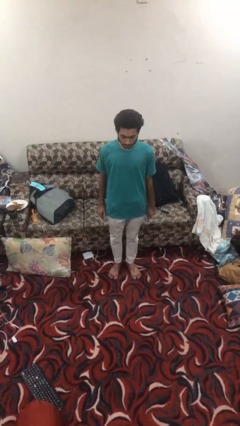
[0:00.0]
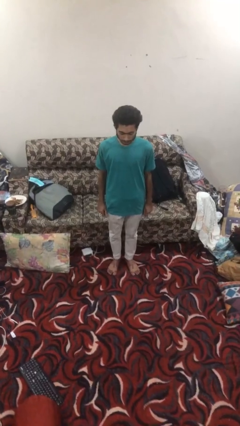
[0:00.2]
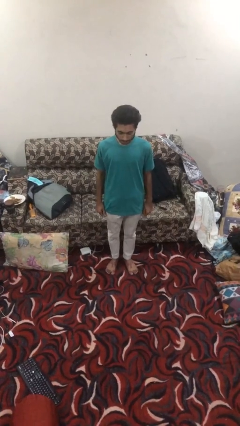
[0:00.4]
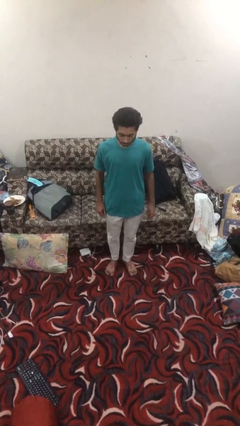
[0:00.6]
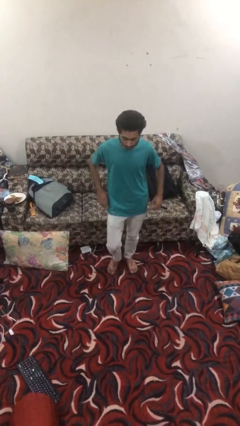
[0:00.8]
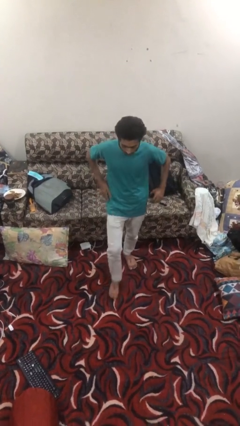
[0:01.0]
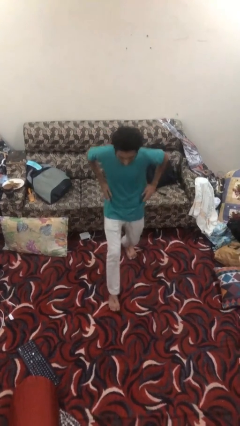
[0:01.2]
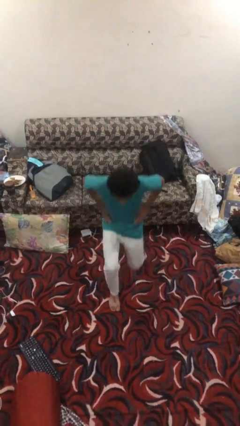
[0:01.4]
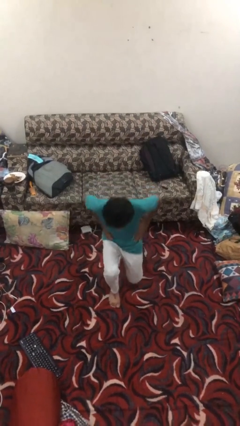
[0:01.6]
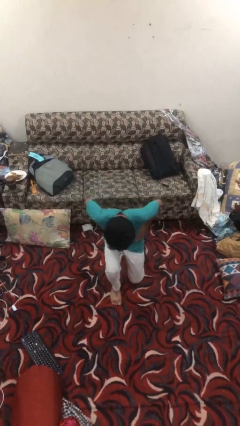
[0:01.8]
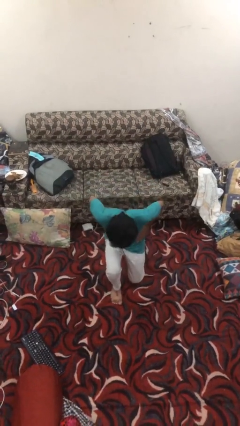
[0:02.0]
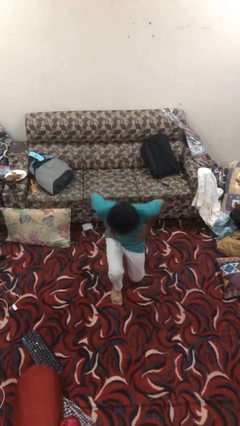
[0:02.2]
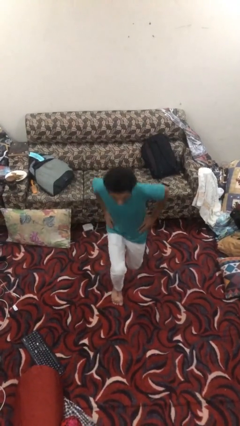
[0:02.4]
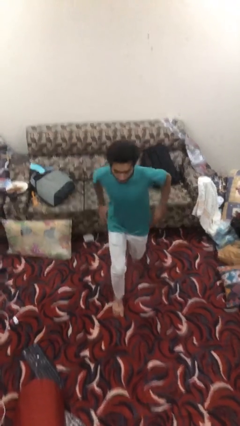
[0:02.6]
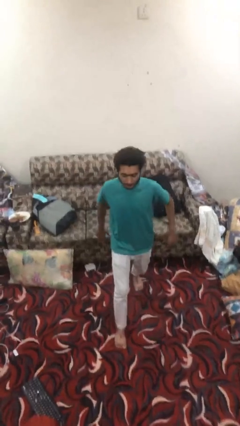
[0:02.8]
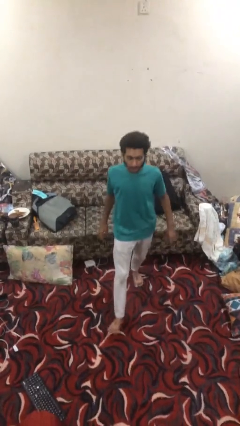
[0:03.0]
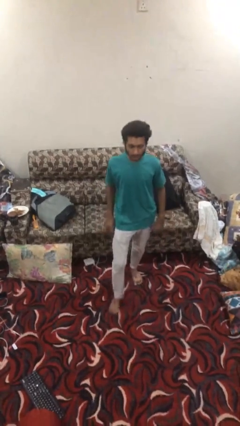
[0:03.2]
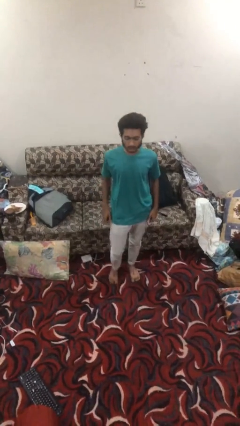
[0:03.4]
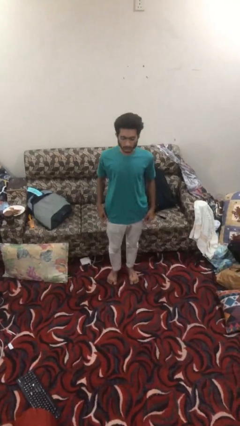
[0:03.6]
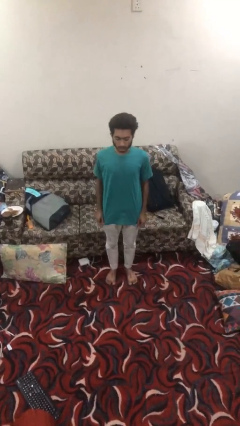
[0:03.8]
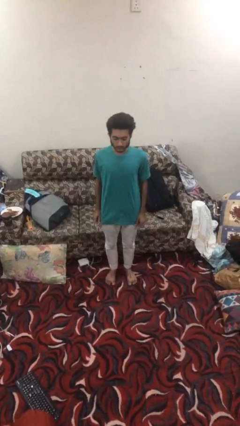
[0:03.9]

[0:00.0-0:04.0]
person exercises with lunges

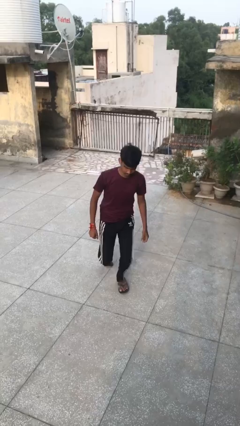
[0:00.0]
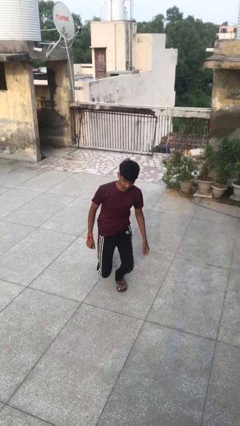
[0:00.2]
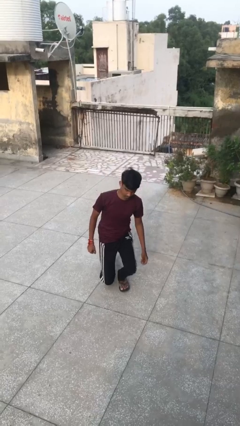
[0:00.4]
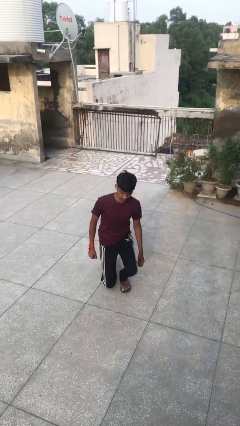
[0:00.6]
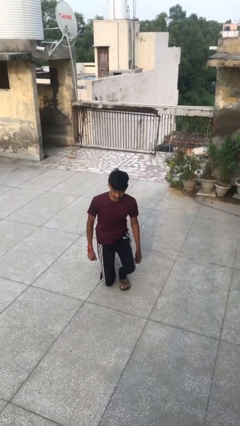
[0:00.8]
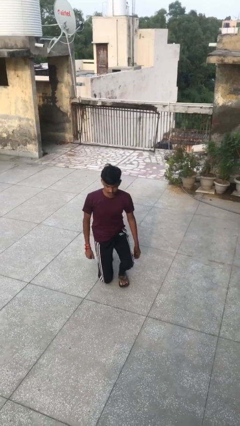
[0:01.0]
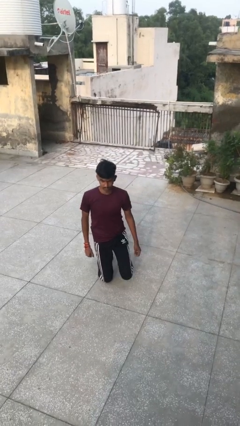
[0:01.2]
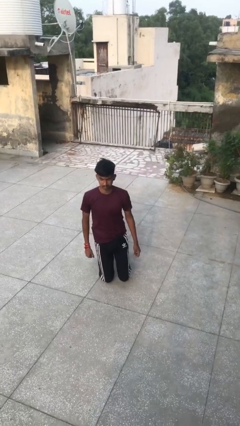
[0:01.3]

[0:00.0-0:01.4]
person kneels

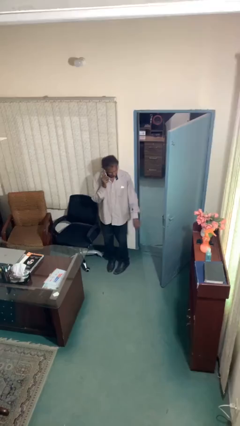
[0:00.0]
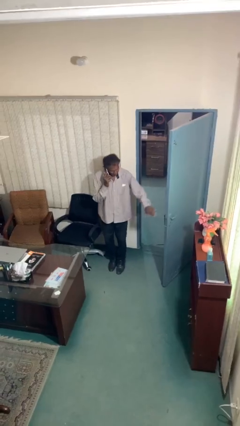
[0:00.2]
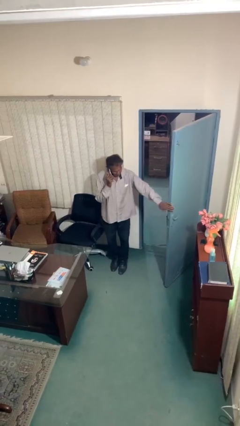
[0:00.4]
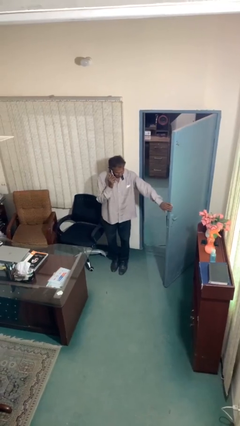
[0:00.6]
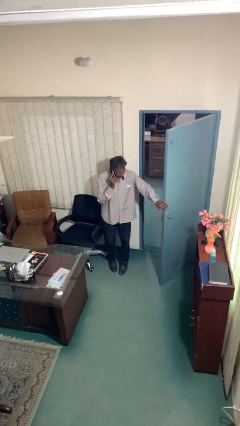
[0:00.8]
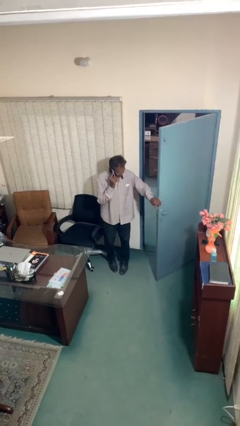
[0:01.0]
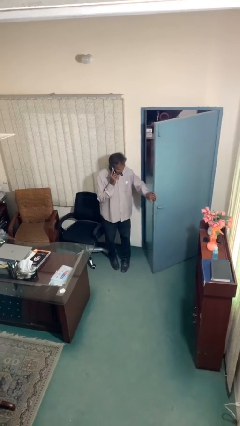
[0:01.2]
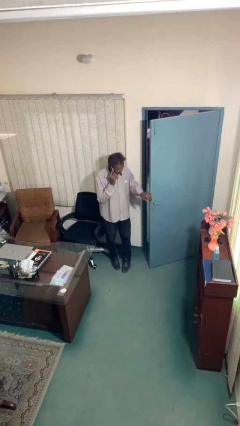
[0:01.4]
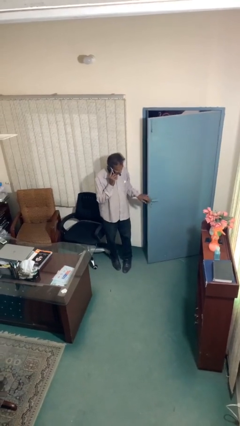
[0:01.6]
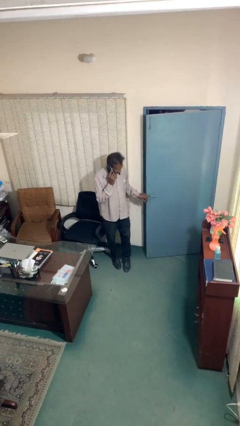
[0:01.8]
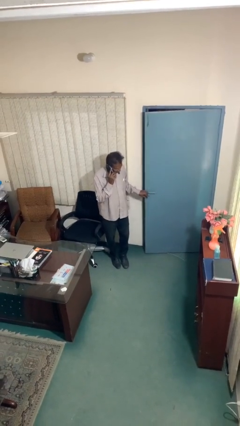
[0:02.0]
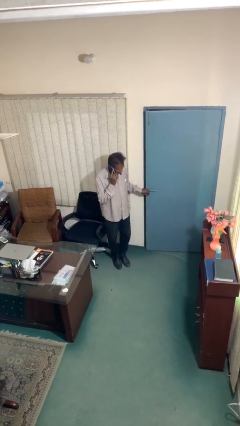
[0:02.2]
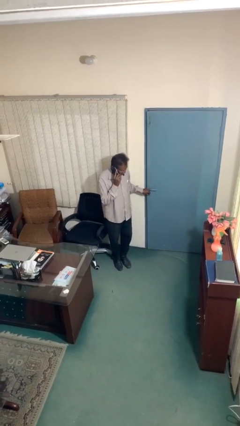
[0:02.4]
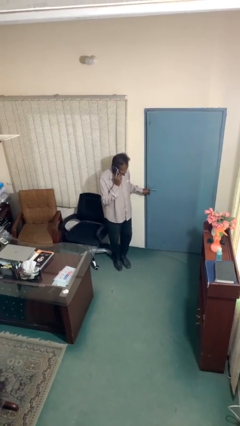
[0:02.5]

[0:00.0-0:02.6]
person closes facility door

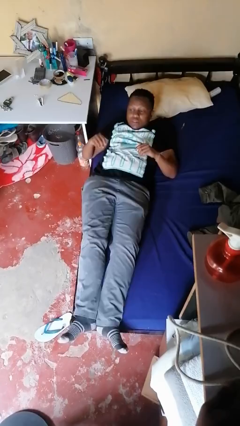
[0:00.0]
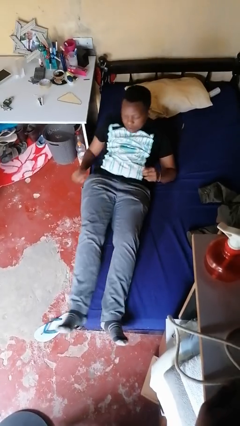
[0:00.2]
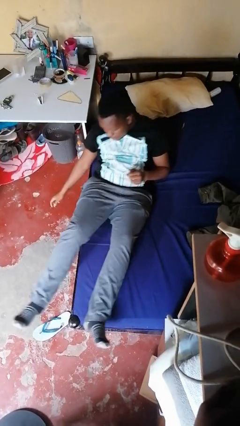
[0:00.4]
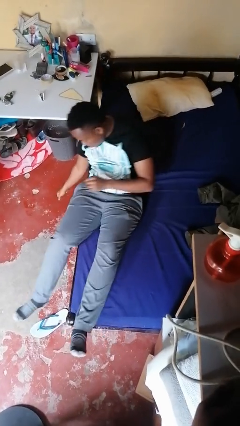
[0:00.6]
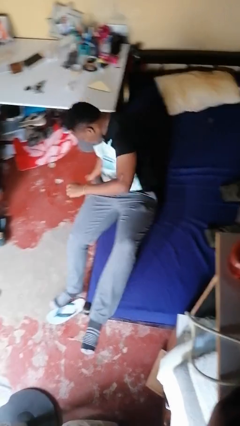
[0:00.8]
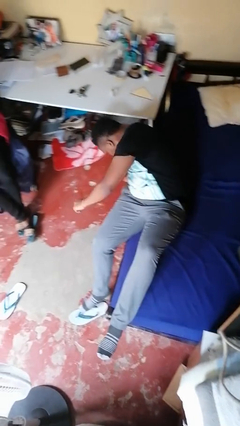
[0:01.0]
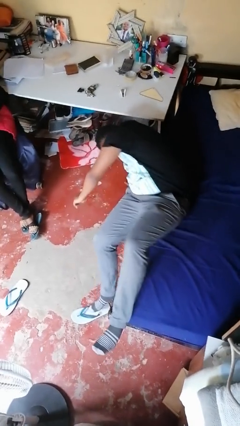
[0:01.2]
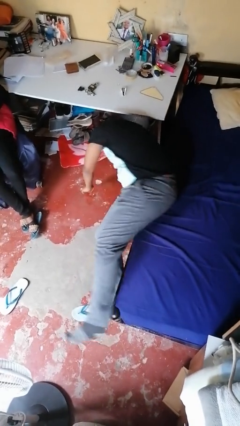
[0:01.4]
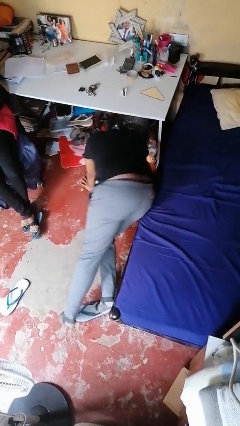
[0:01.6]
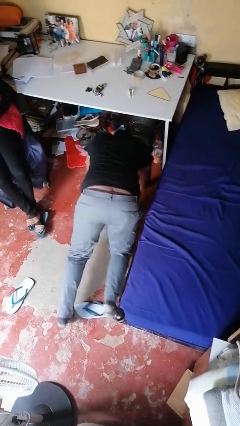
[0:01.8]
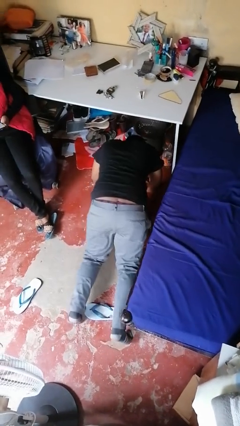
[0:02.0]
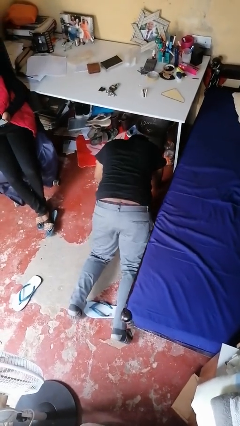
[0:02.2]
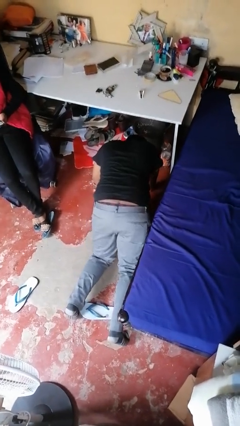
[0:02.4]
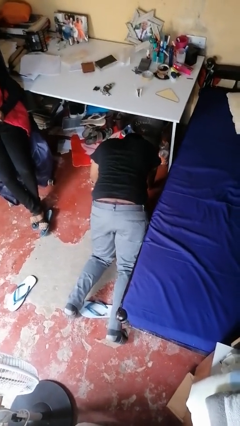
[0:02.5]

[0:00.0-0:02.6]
person falls from bed

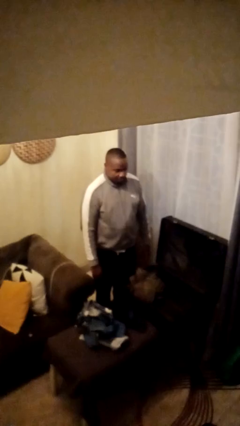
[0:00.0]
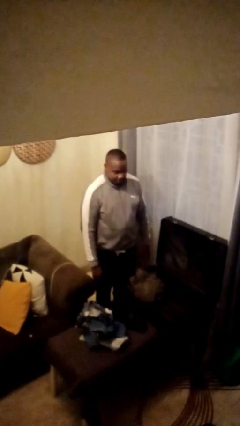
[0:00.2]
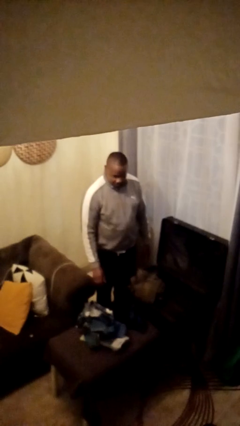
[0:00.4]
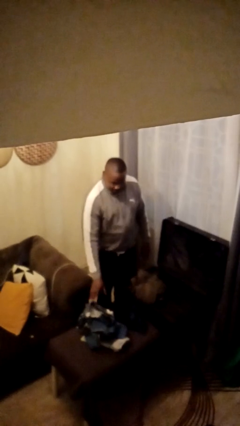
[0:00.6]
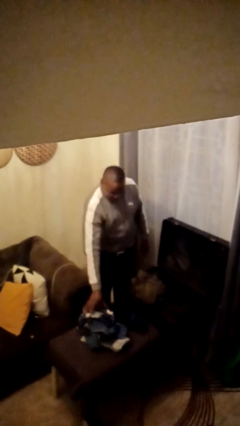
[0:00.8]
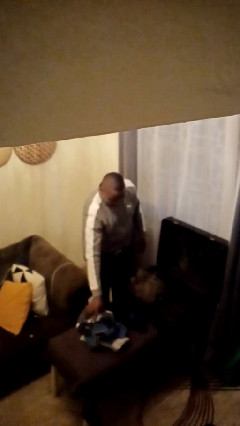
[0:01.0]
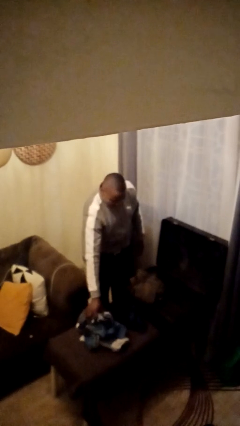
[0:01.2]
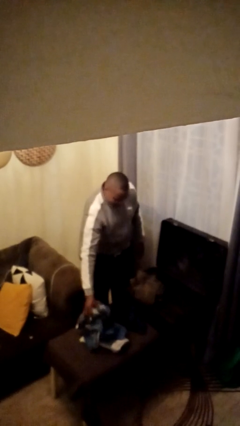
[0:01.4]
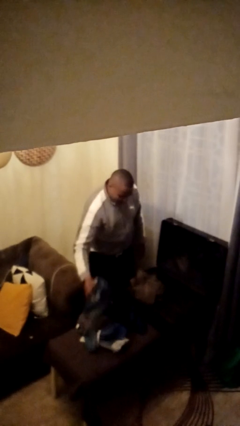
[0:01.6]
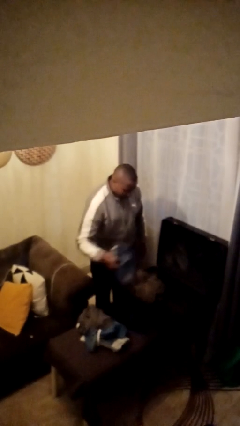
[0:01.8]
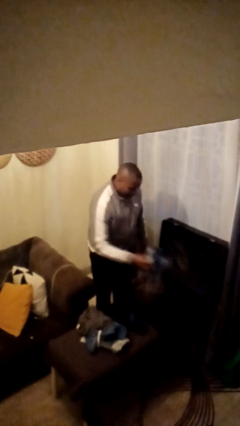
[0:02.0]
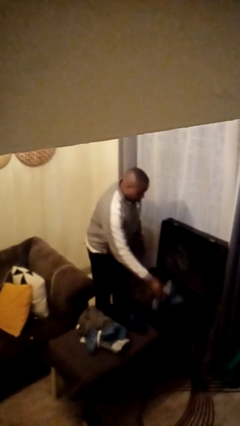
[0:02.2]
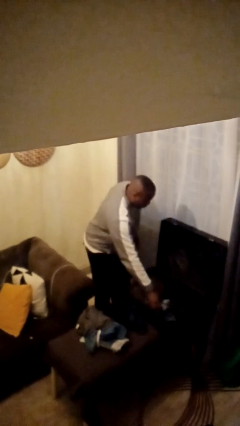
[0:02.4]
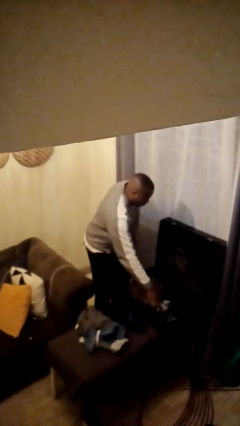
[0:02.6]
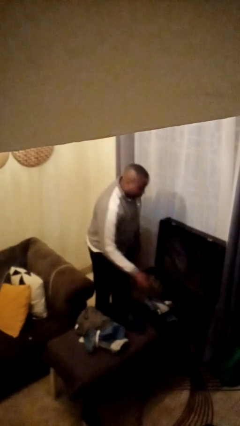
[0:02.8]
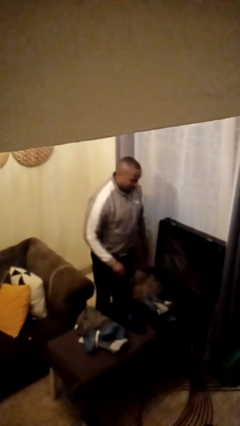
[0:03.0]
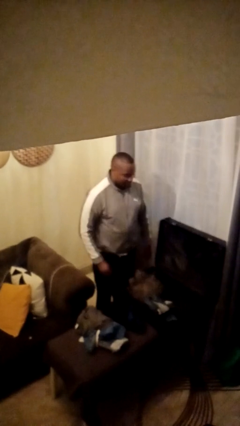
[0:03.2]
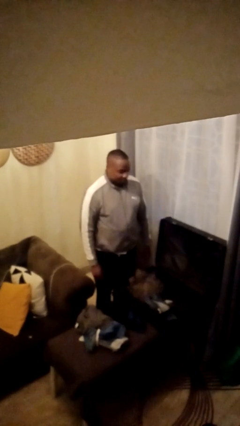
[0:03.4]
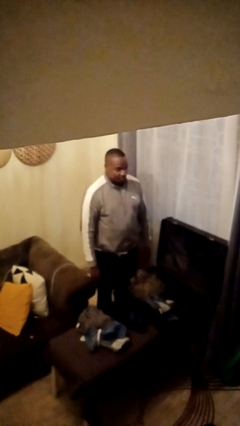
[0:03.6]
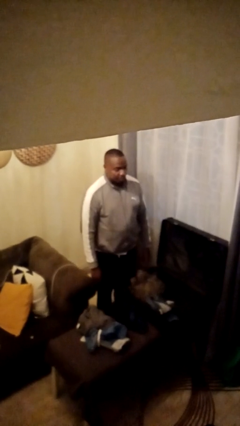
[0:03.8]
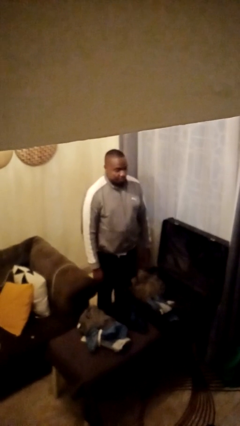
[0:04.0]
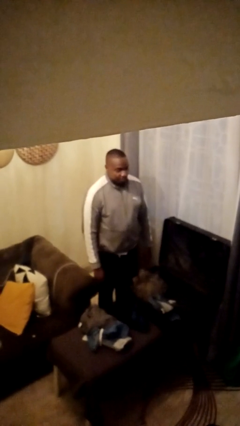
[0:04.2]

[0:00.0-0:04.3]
person loads clothes into suitcase

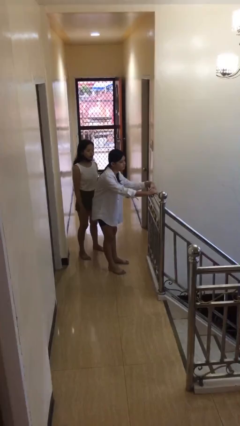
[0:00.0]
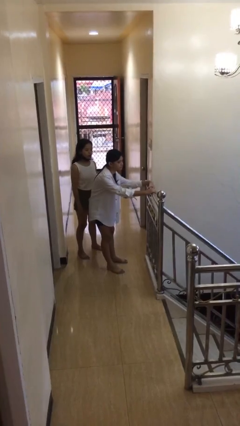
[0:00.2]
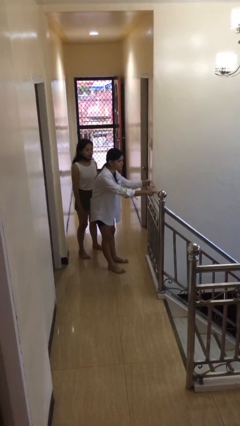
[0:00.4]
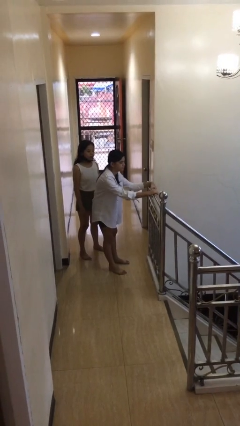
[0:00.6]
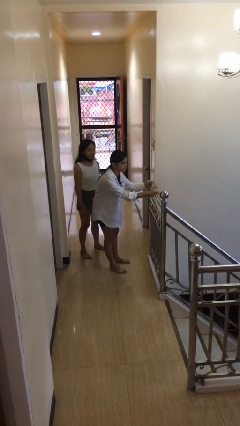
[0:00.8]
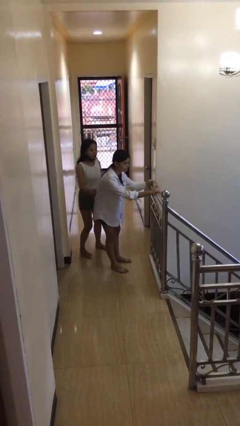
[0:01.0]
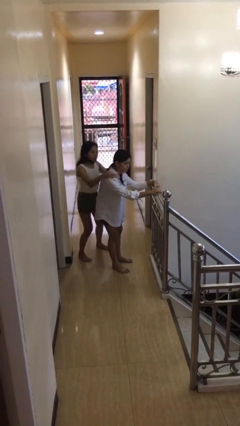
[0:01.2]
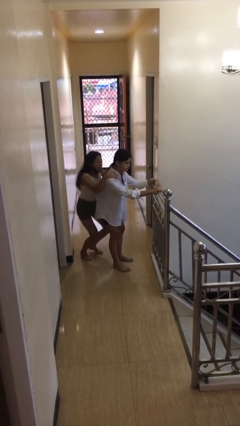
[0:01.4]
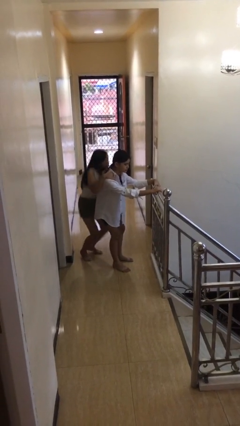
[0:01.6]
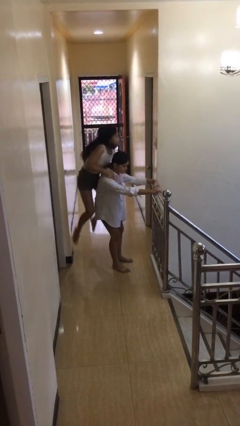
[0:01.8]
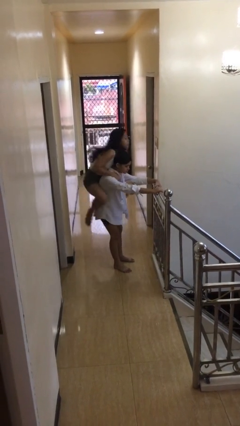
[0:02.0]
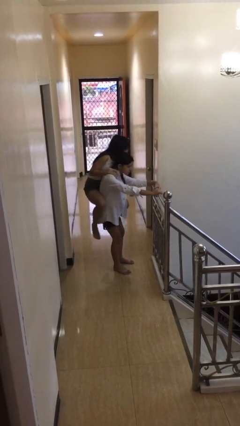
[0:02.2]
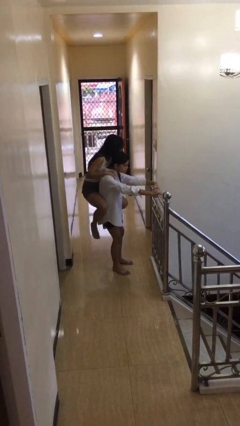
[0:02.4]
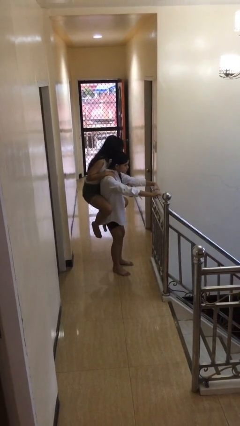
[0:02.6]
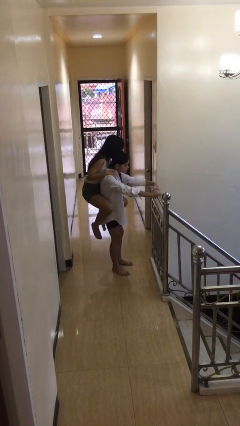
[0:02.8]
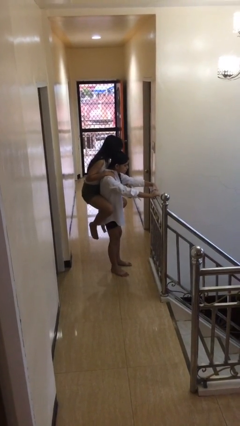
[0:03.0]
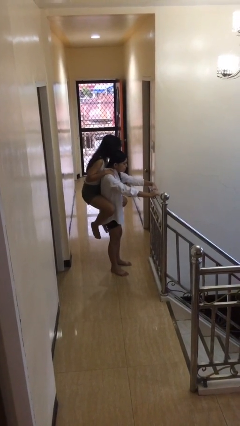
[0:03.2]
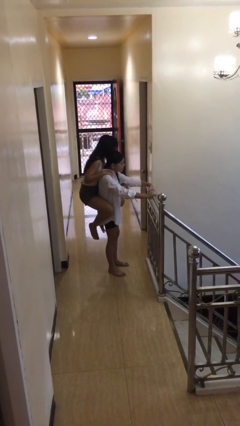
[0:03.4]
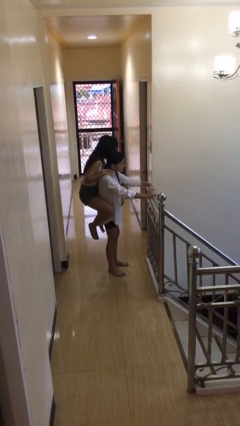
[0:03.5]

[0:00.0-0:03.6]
person carries person over shoulder
